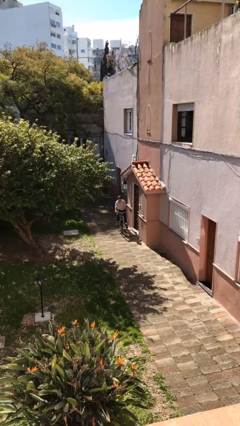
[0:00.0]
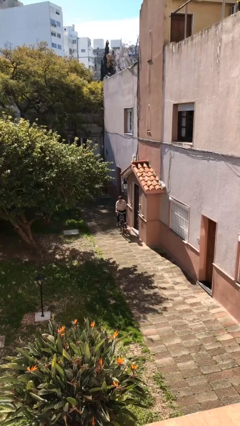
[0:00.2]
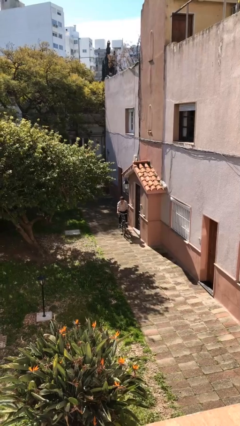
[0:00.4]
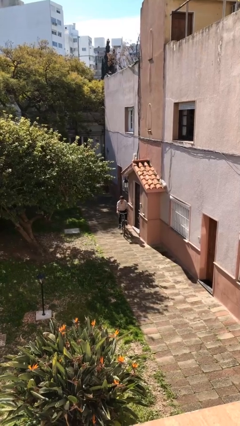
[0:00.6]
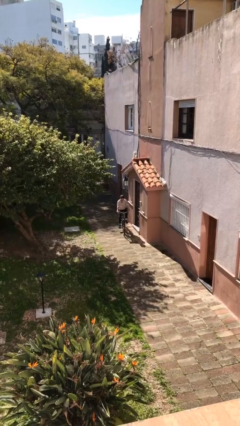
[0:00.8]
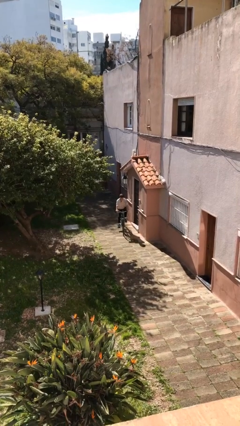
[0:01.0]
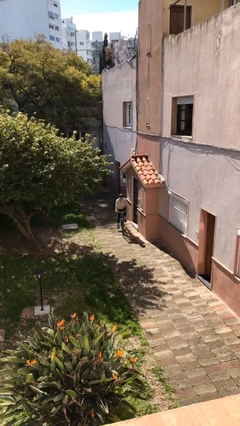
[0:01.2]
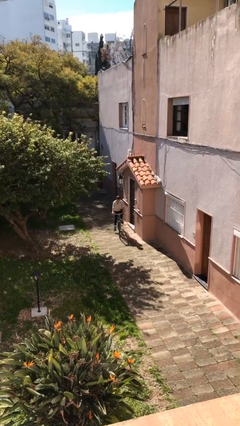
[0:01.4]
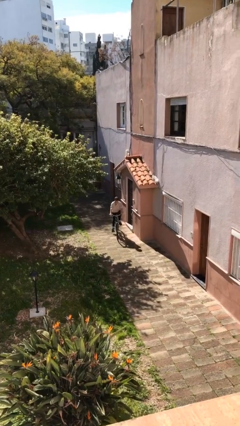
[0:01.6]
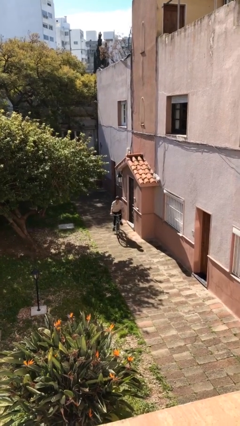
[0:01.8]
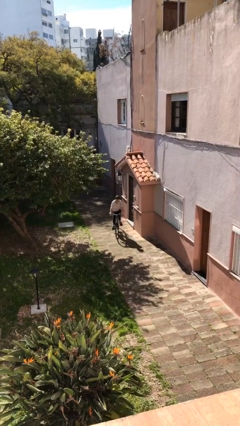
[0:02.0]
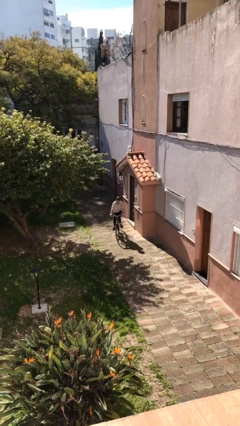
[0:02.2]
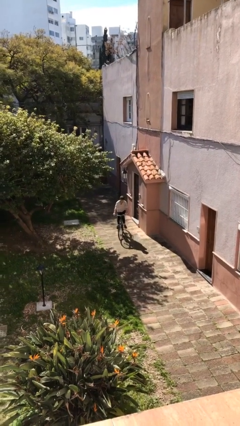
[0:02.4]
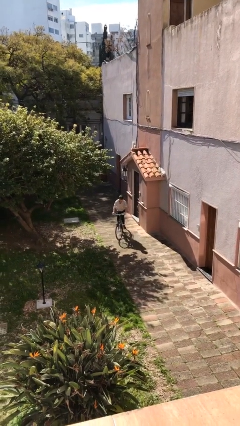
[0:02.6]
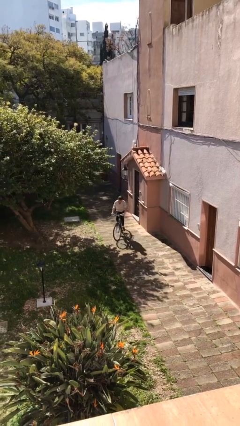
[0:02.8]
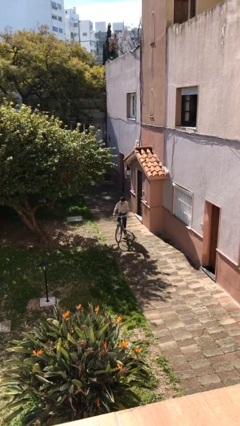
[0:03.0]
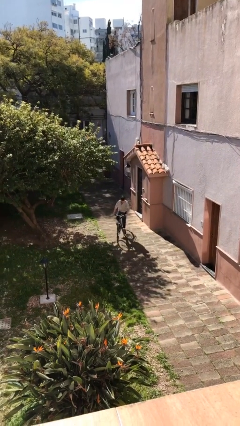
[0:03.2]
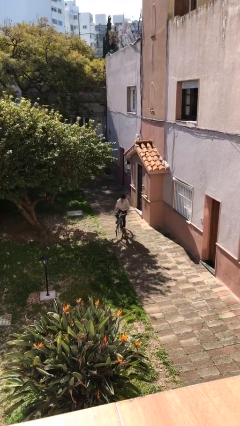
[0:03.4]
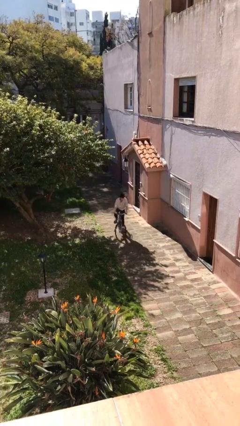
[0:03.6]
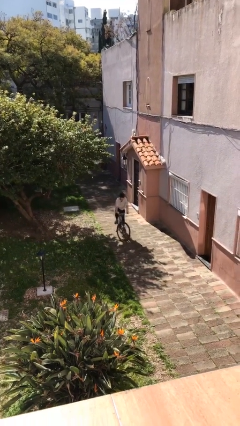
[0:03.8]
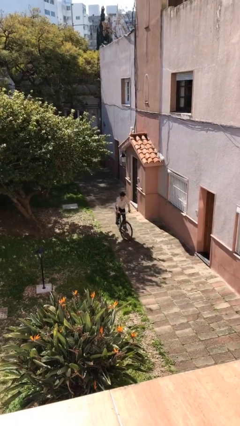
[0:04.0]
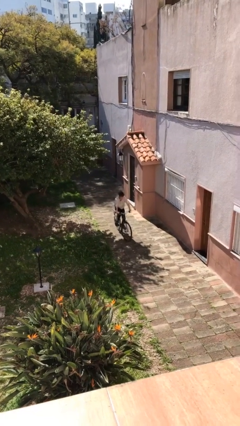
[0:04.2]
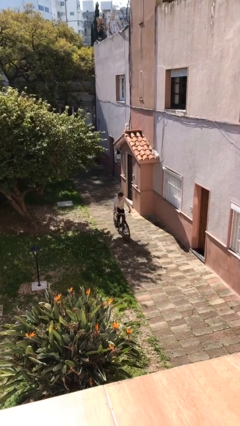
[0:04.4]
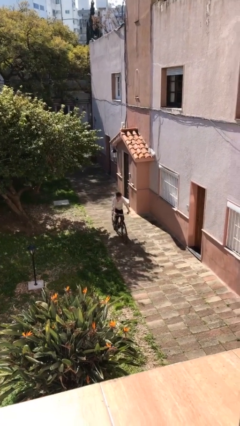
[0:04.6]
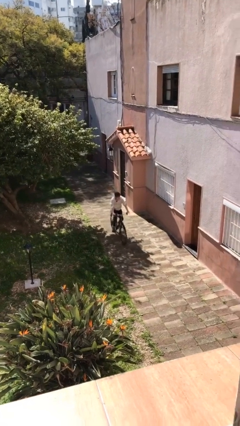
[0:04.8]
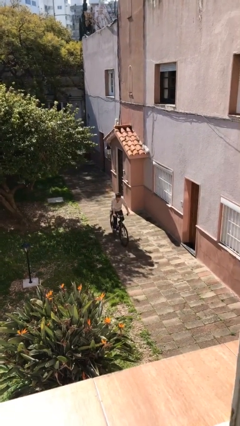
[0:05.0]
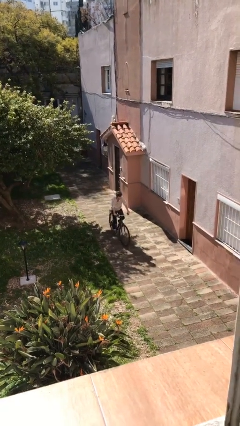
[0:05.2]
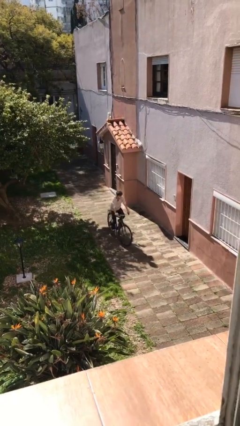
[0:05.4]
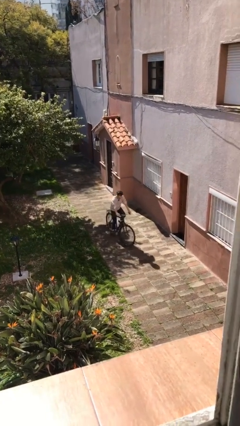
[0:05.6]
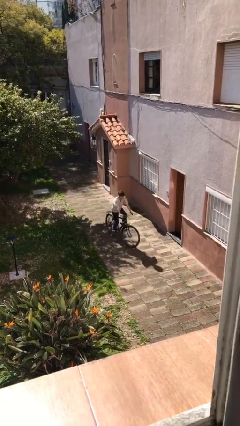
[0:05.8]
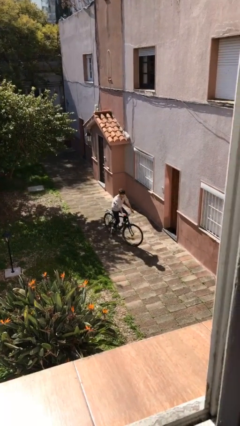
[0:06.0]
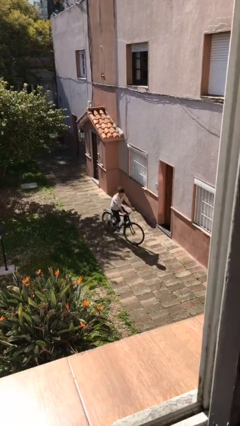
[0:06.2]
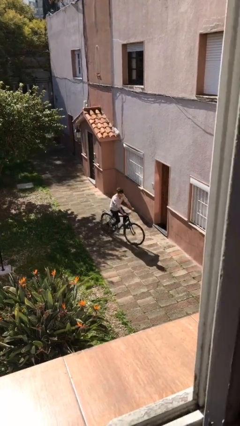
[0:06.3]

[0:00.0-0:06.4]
person rides bicycle

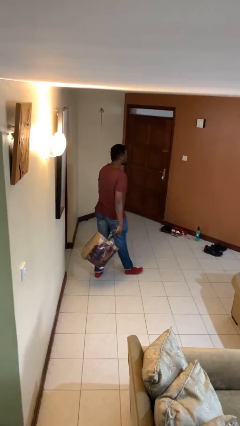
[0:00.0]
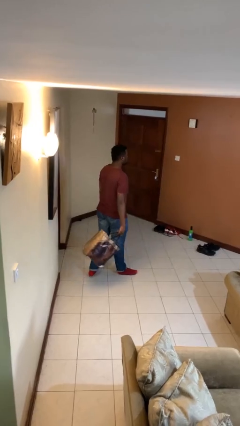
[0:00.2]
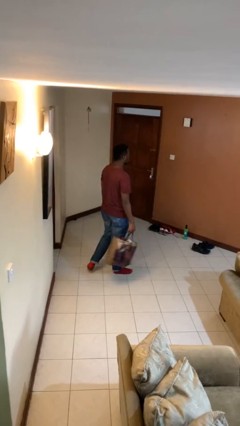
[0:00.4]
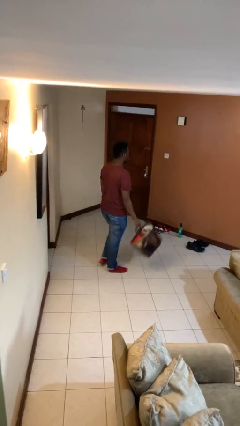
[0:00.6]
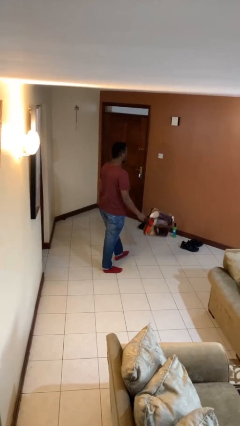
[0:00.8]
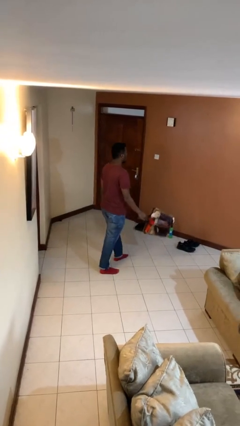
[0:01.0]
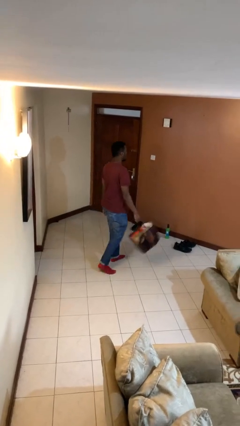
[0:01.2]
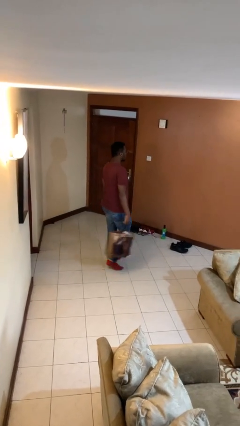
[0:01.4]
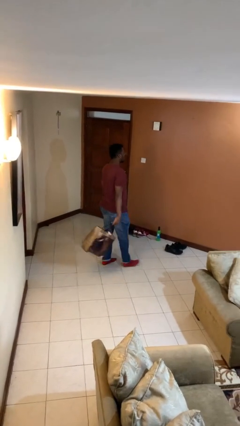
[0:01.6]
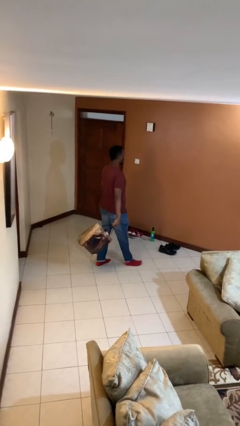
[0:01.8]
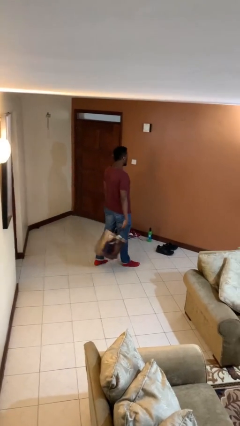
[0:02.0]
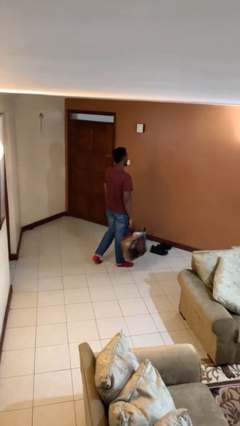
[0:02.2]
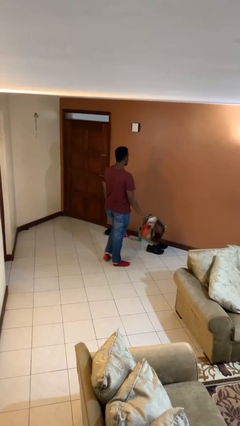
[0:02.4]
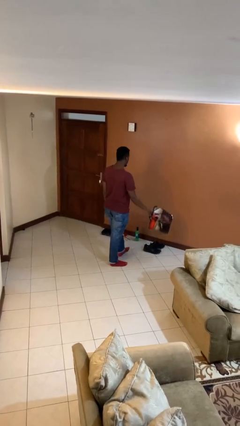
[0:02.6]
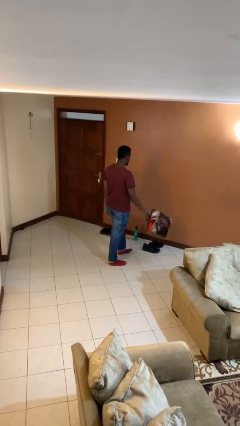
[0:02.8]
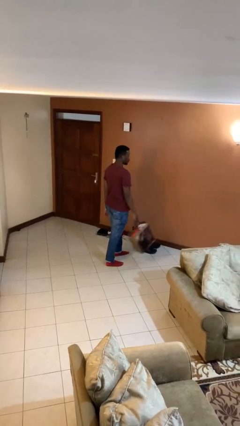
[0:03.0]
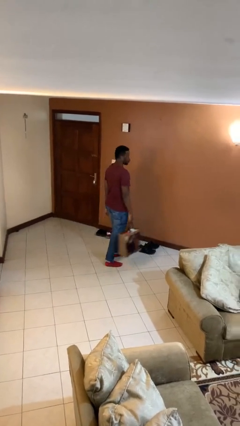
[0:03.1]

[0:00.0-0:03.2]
person carries groceries

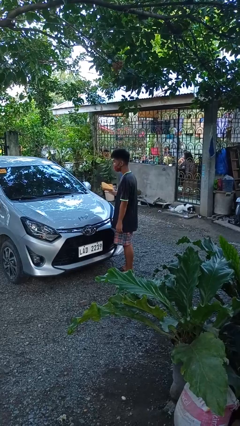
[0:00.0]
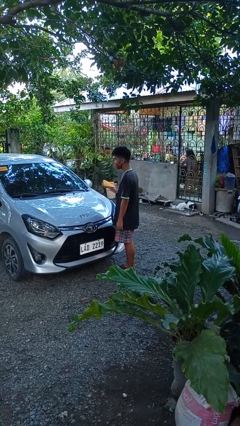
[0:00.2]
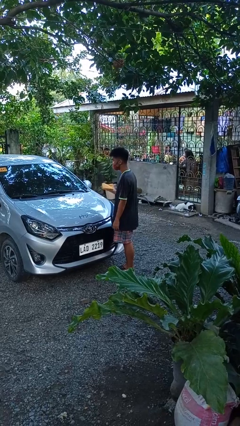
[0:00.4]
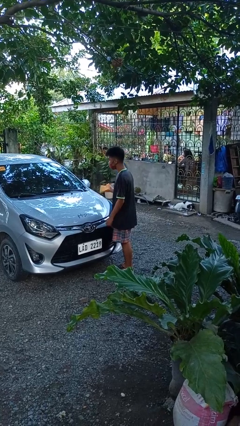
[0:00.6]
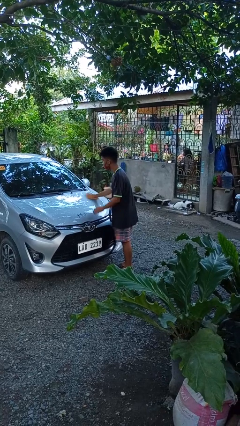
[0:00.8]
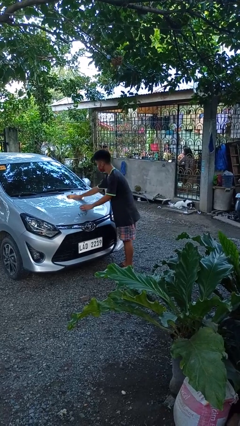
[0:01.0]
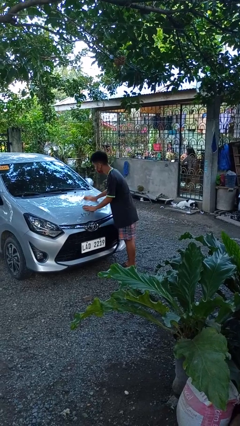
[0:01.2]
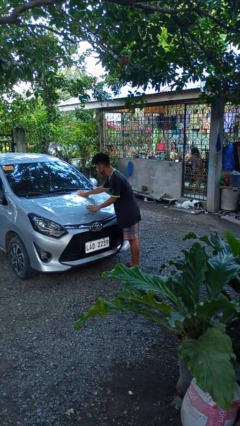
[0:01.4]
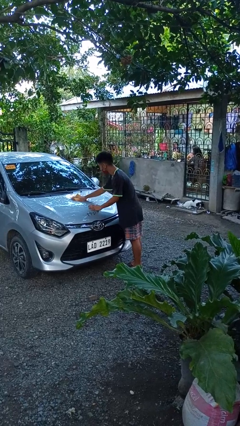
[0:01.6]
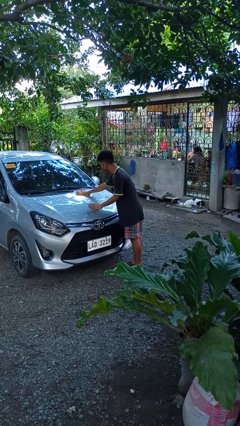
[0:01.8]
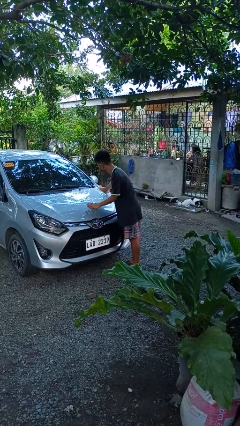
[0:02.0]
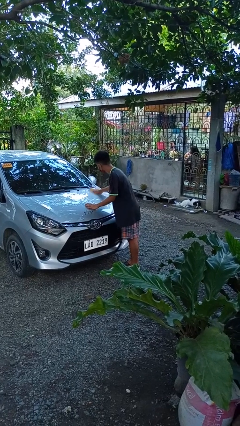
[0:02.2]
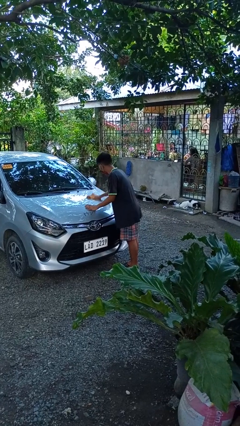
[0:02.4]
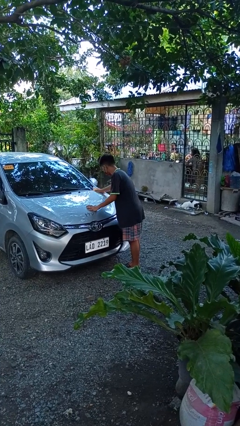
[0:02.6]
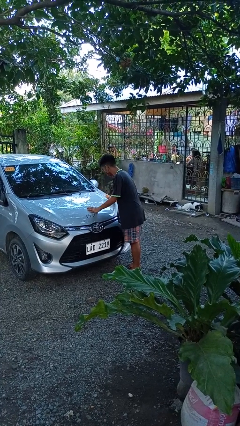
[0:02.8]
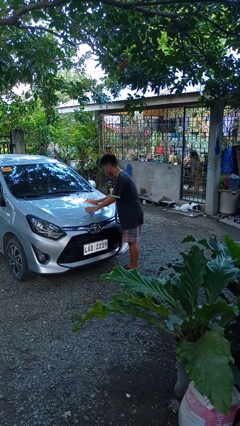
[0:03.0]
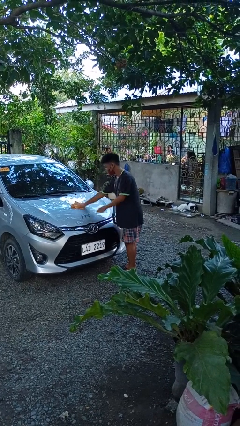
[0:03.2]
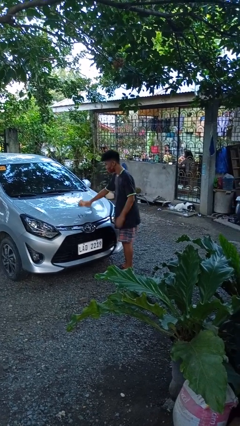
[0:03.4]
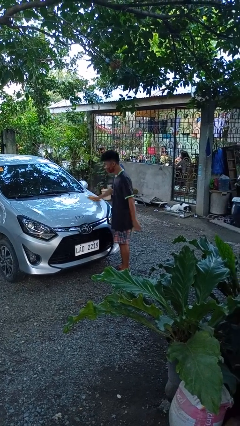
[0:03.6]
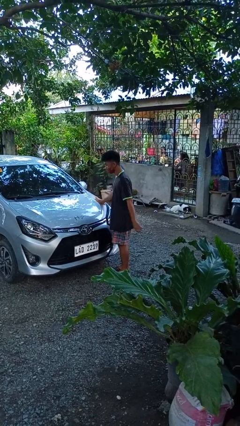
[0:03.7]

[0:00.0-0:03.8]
person polishes car with rag

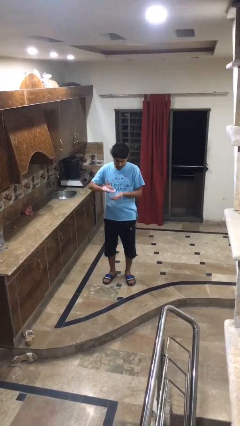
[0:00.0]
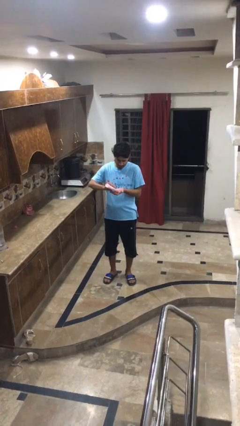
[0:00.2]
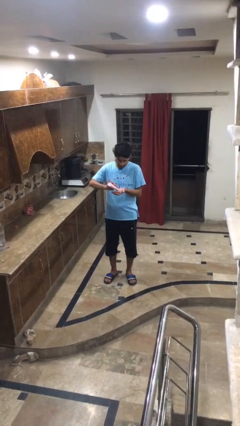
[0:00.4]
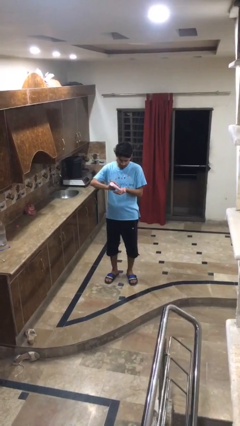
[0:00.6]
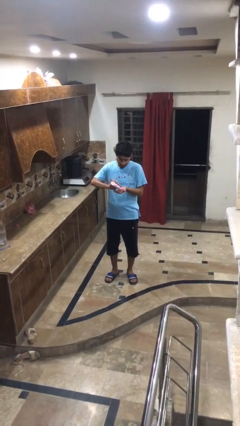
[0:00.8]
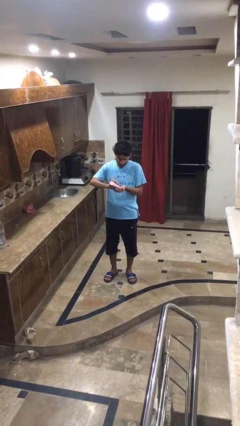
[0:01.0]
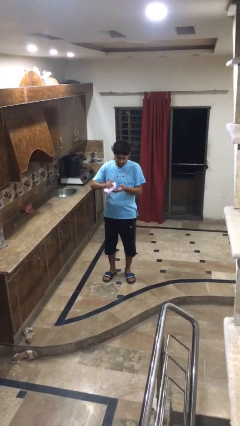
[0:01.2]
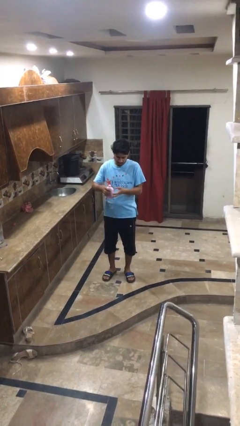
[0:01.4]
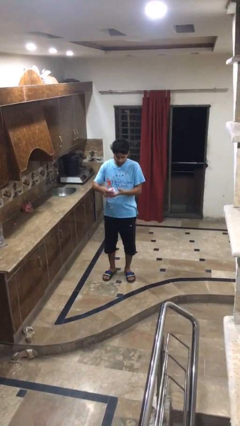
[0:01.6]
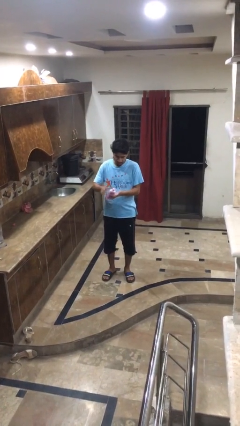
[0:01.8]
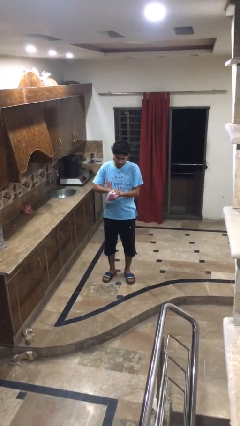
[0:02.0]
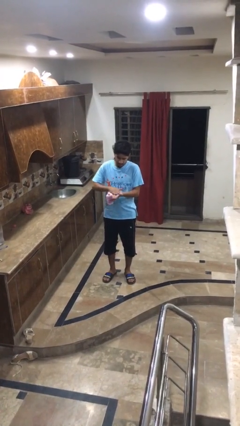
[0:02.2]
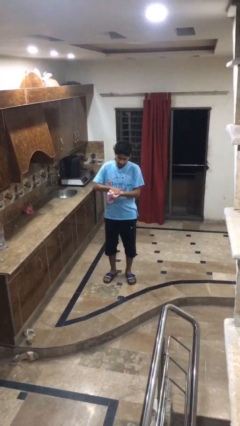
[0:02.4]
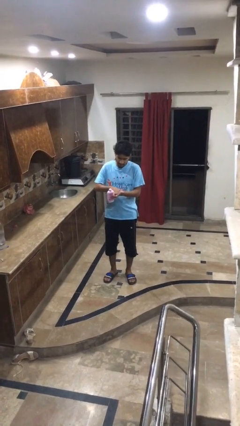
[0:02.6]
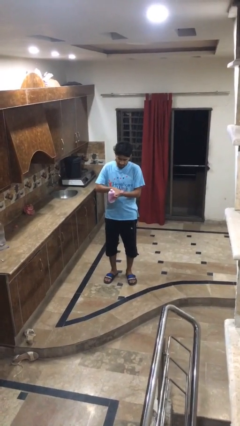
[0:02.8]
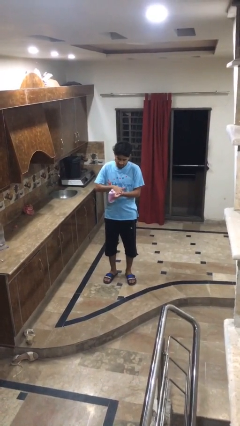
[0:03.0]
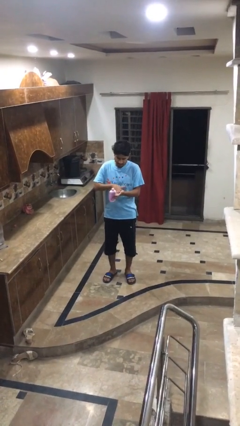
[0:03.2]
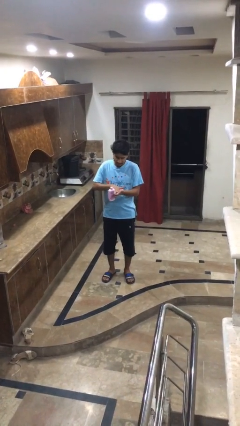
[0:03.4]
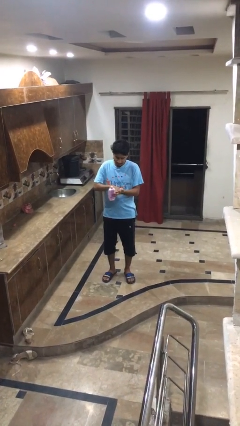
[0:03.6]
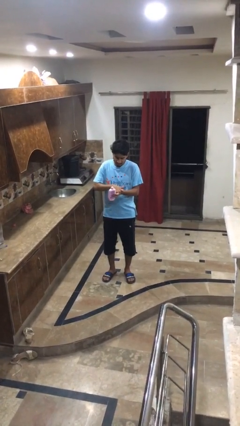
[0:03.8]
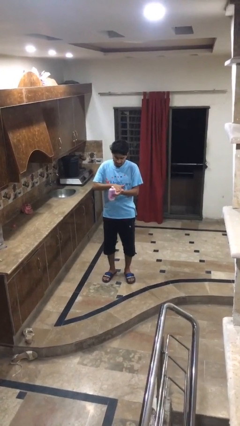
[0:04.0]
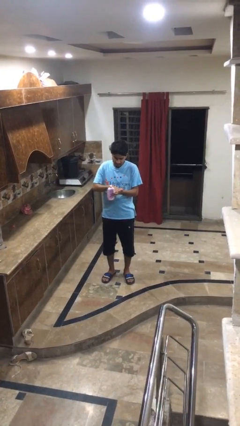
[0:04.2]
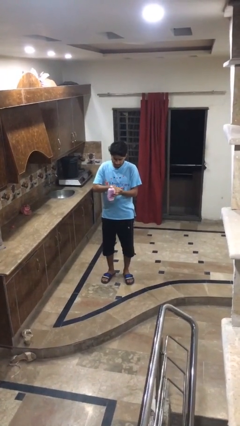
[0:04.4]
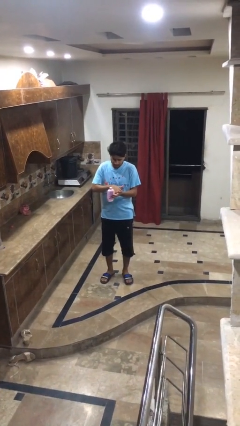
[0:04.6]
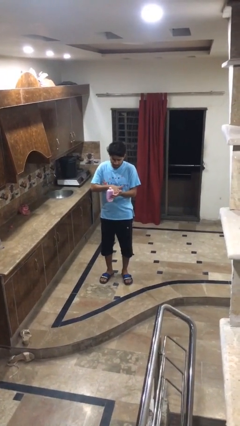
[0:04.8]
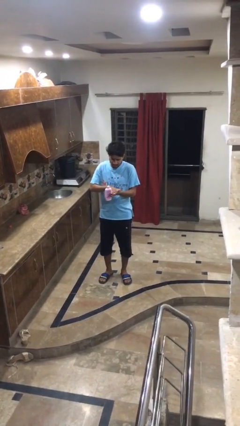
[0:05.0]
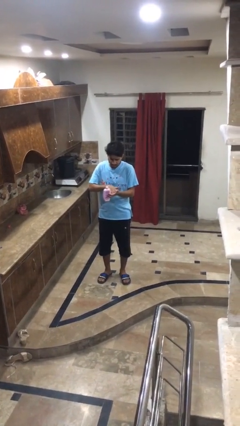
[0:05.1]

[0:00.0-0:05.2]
person applies sunscreen
